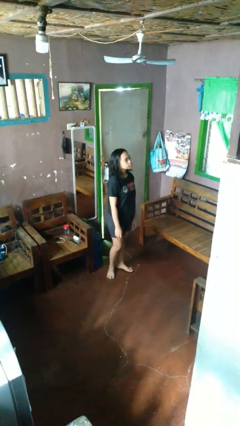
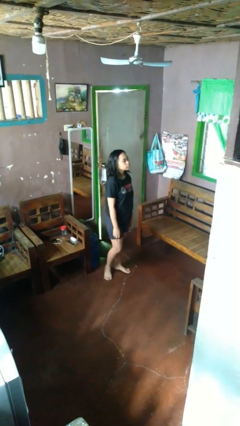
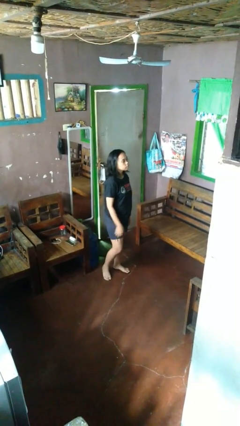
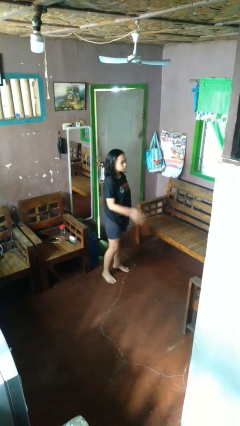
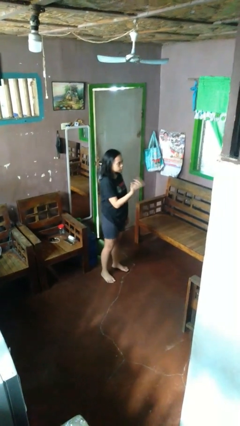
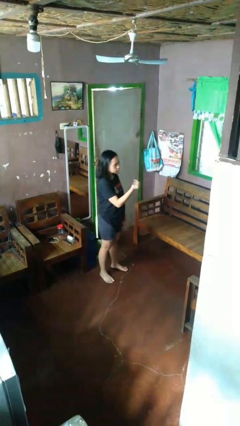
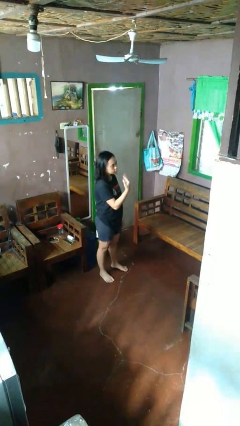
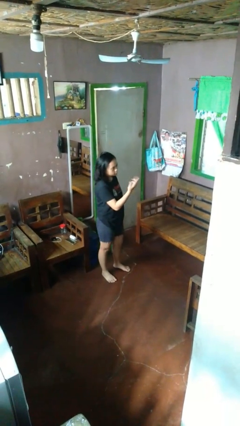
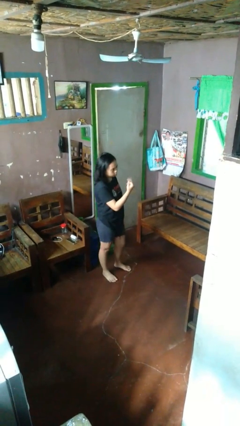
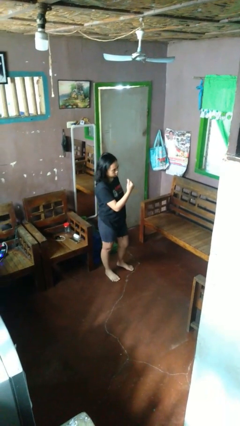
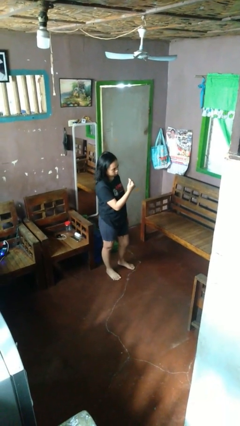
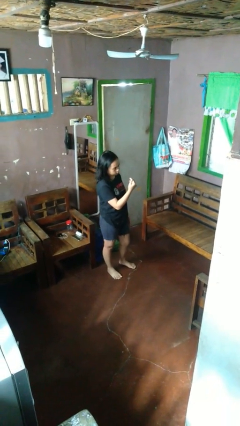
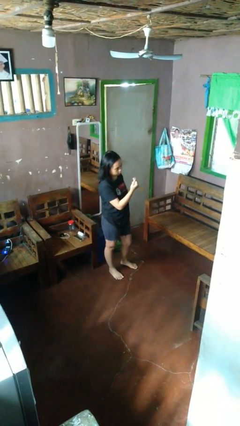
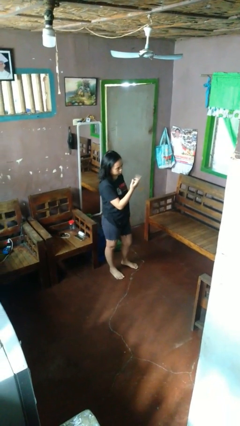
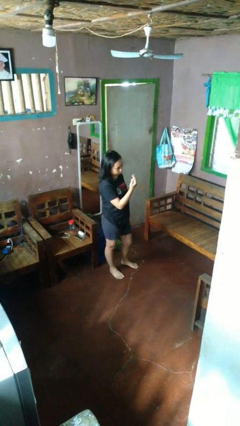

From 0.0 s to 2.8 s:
person gestures come here

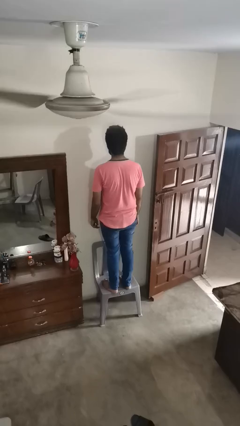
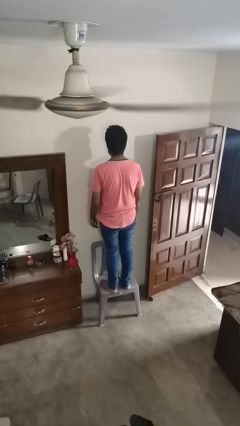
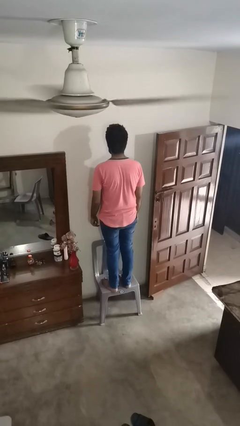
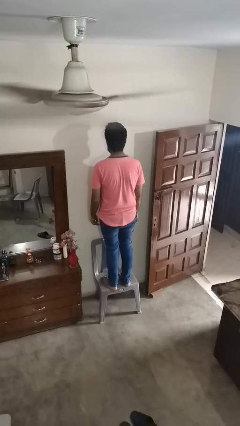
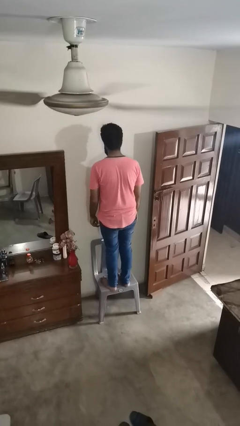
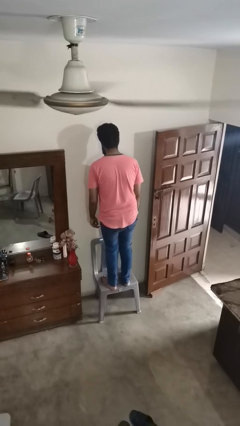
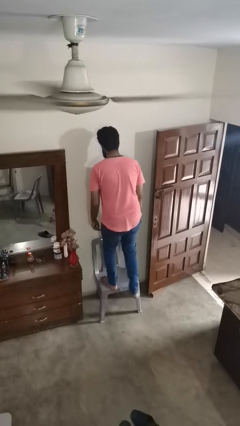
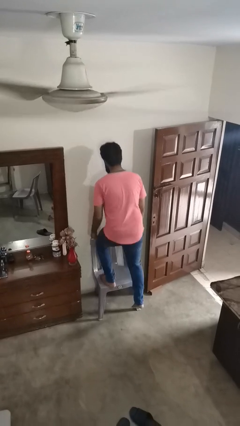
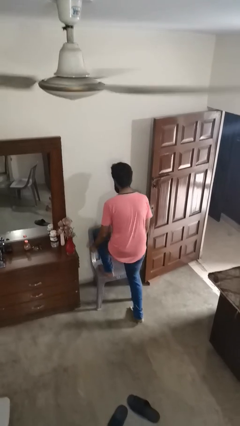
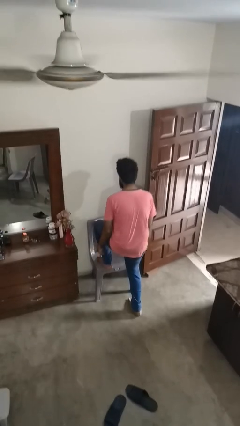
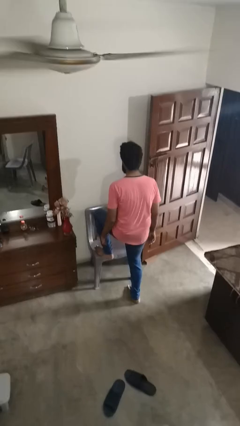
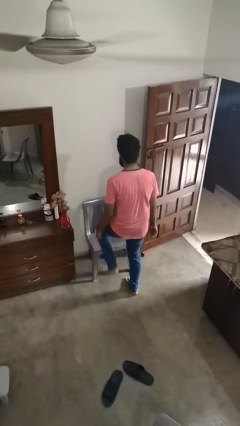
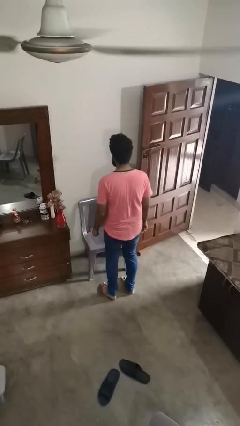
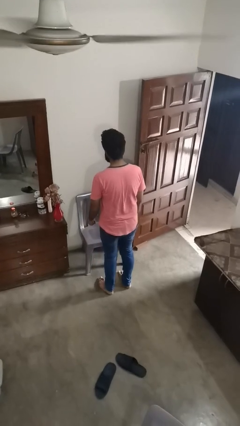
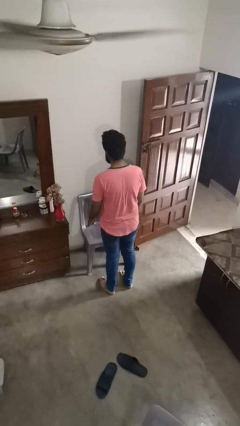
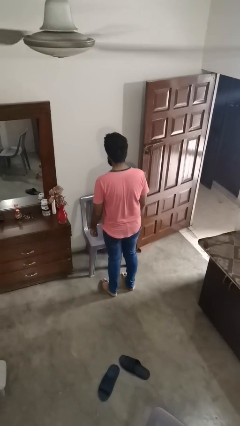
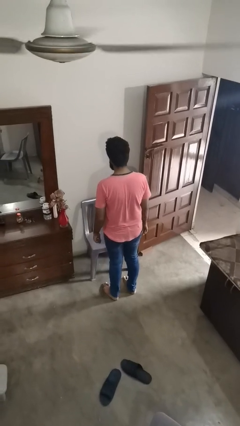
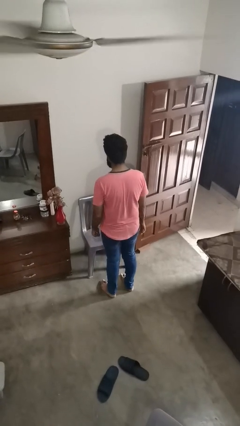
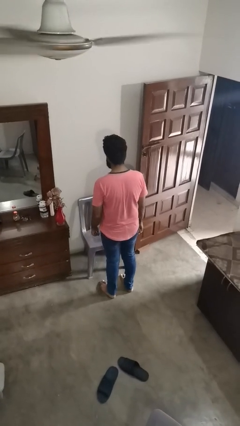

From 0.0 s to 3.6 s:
person climbs off chair

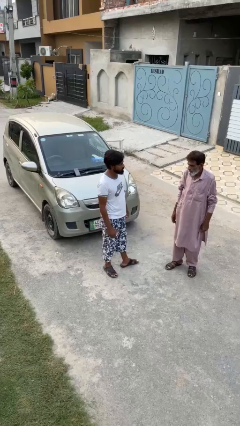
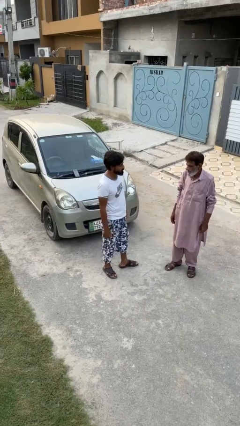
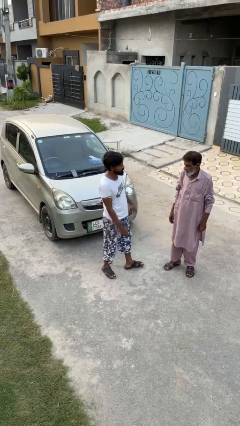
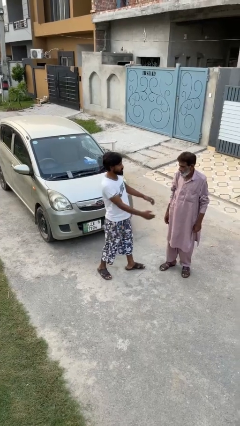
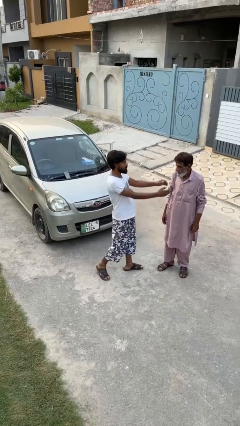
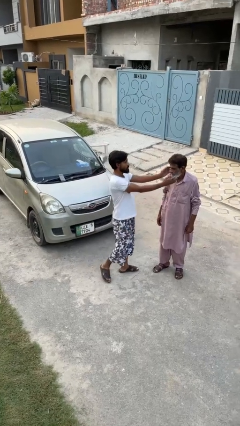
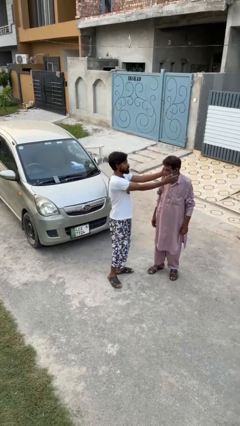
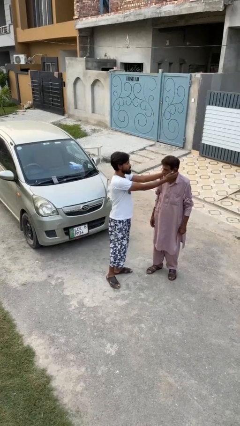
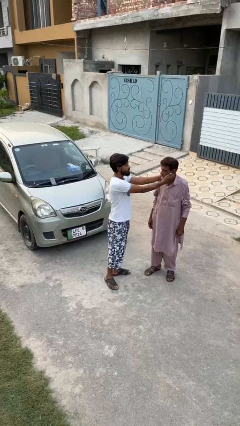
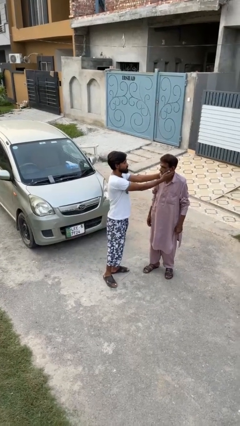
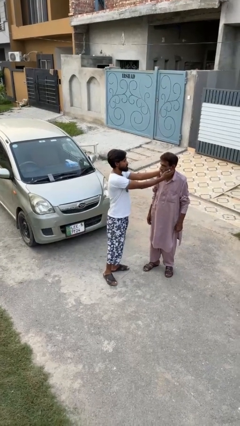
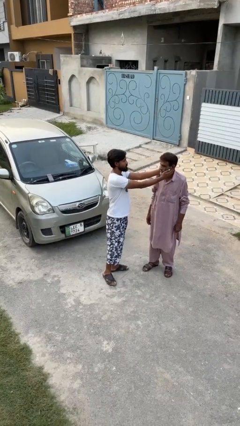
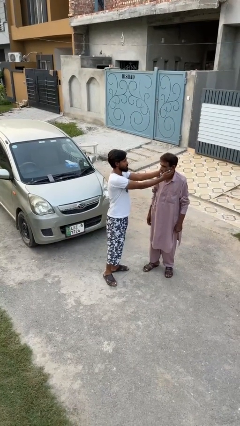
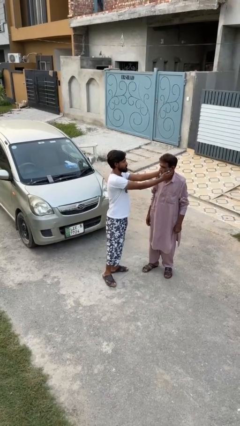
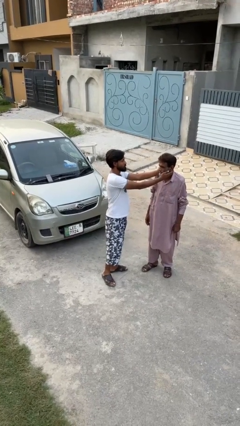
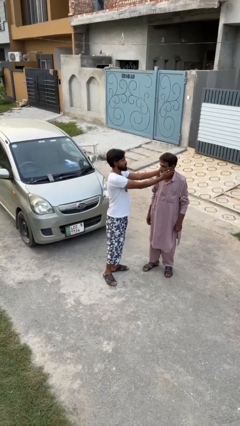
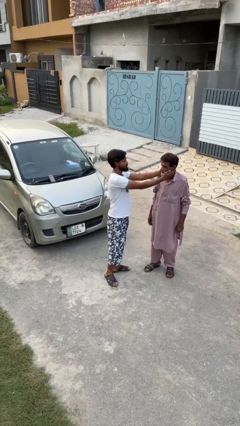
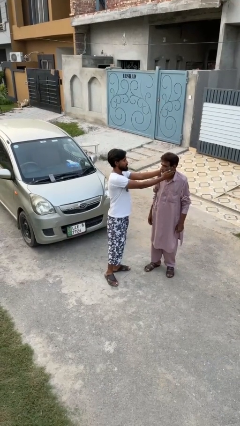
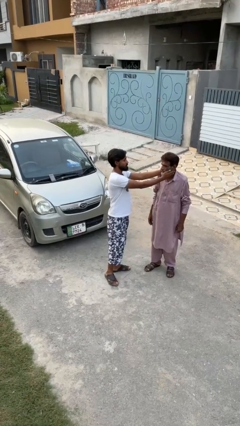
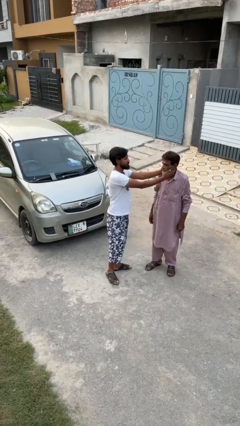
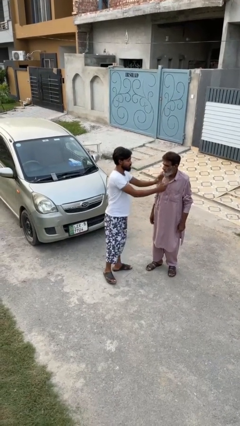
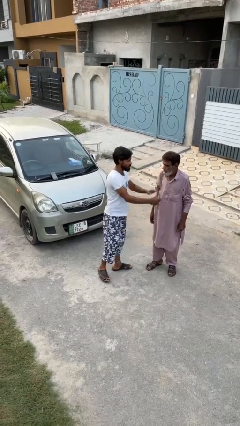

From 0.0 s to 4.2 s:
person touches face of person

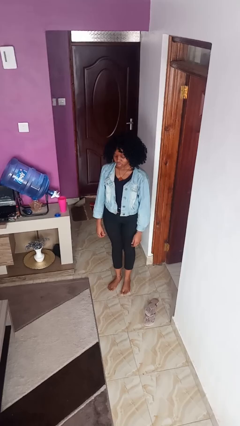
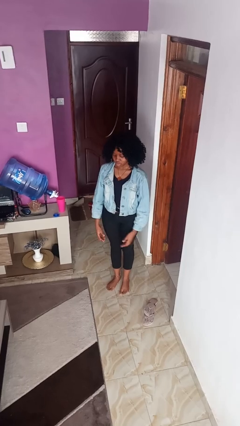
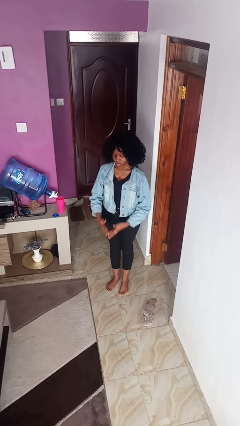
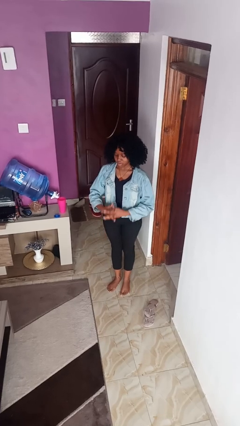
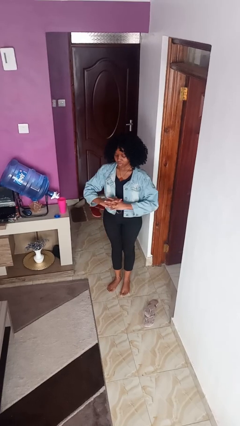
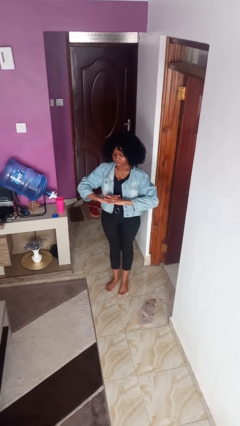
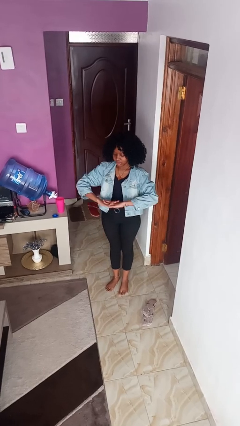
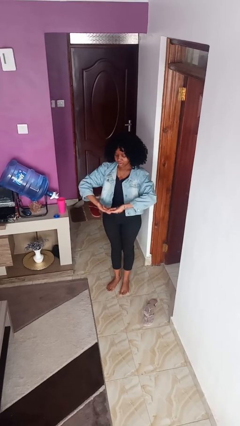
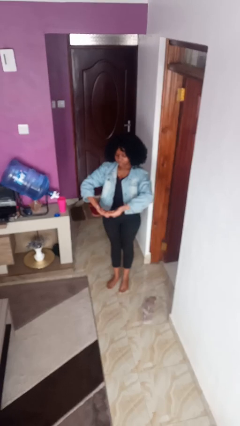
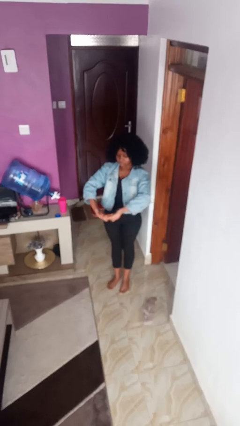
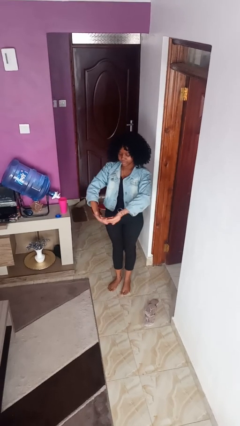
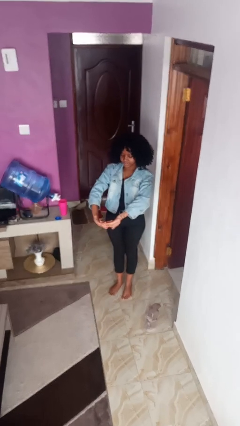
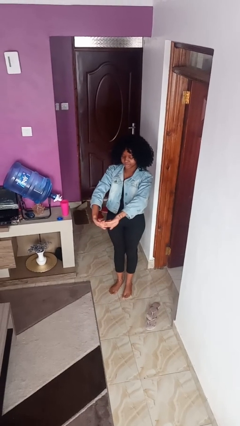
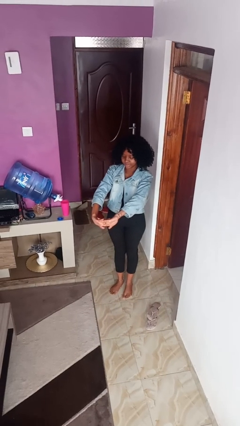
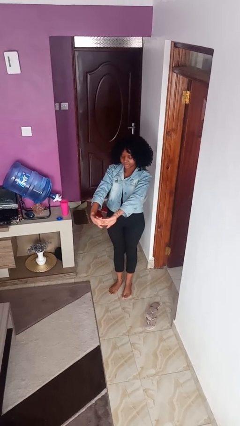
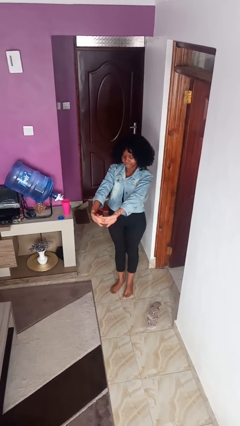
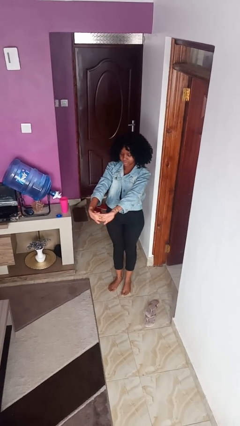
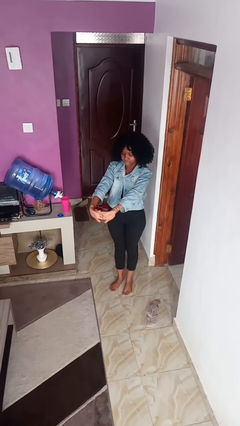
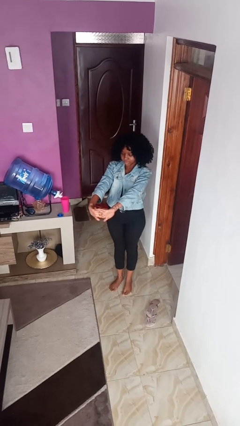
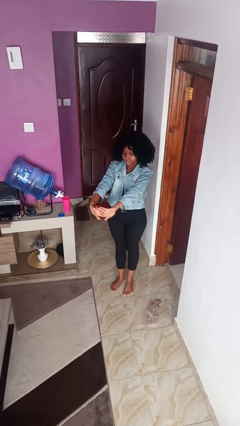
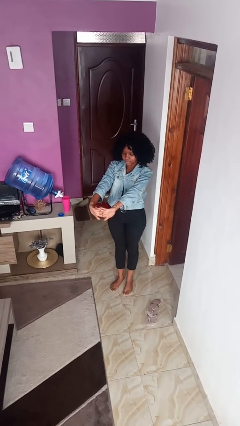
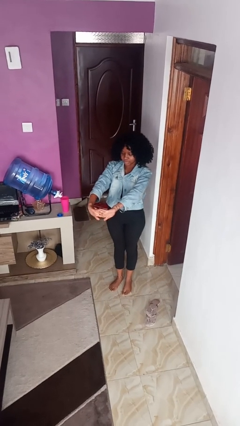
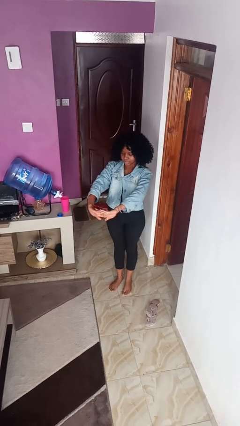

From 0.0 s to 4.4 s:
person cracks knuckles

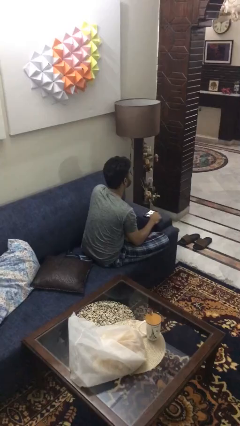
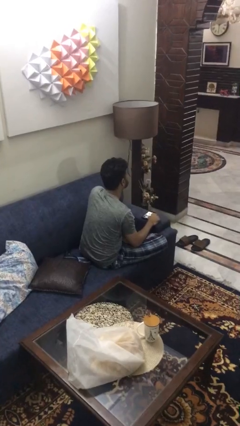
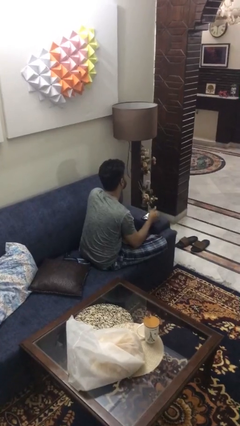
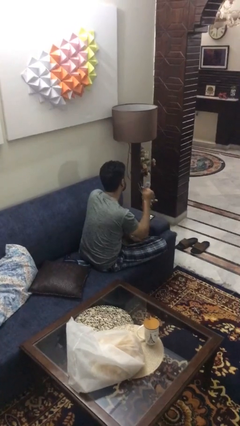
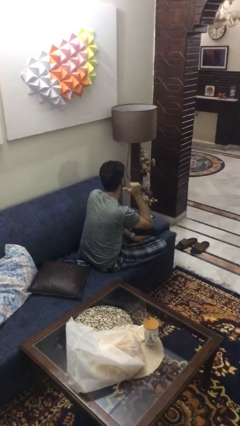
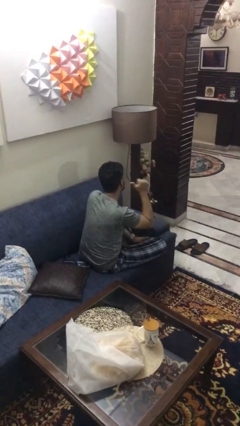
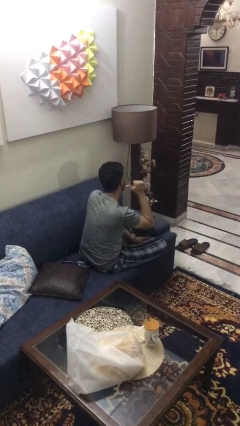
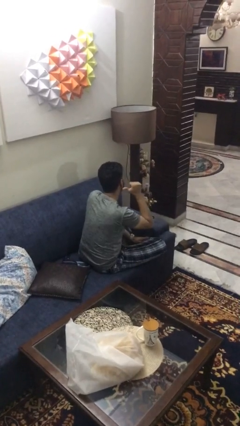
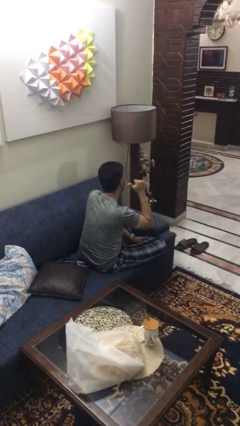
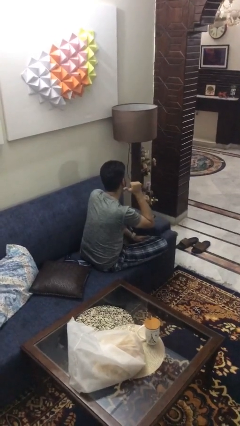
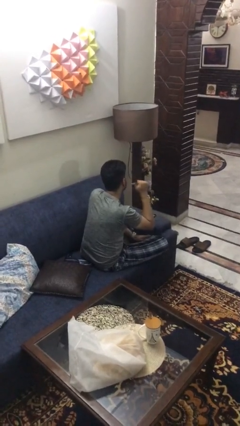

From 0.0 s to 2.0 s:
person gestures behind me

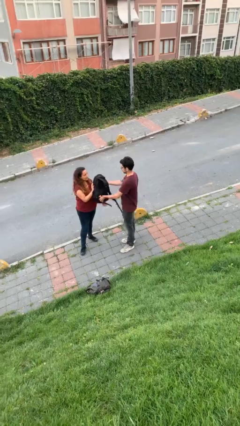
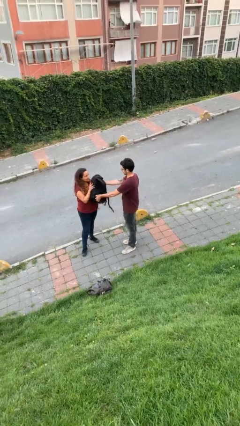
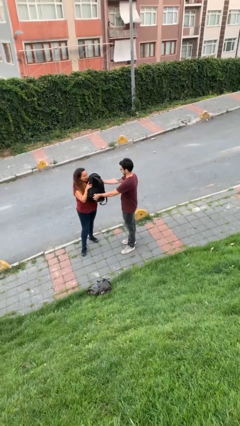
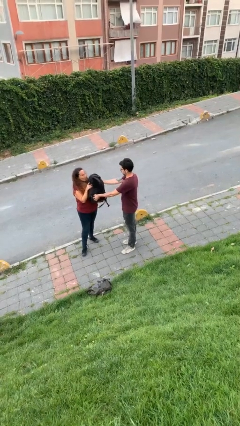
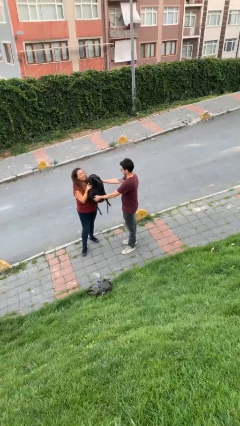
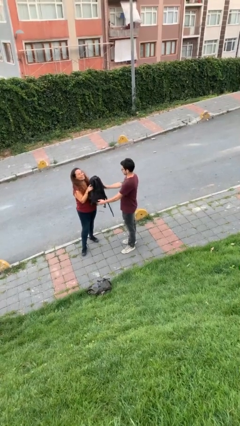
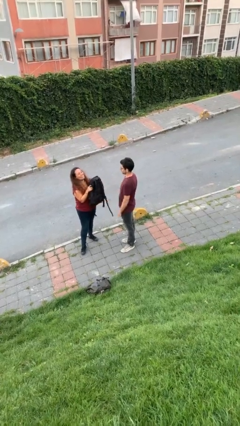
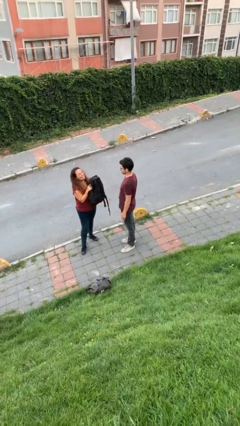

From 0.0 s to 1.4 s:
person transfers object to person
